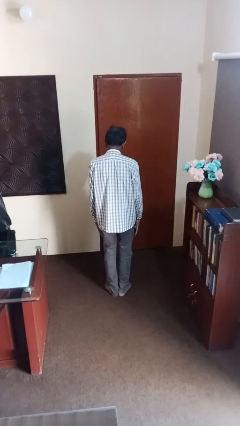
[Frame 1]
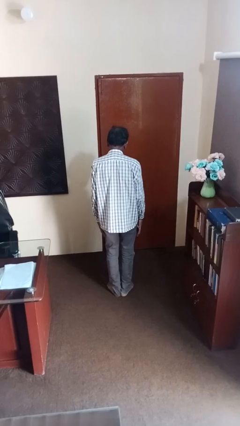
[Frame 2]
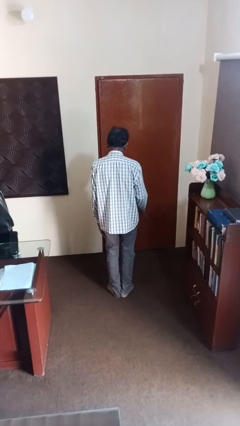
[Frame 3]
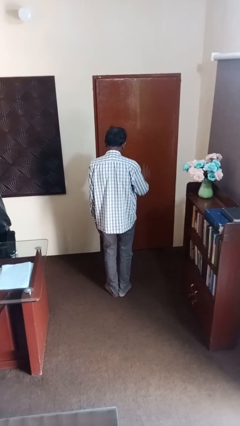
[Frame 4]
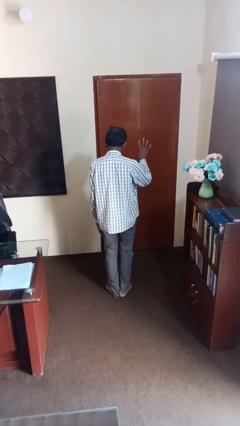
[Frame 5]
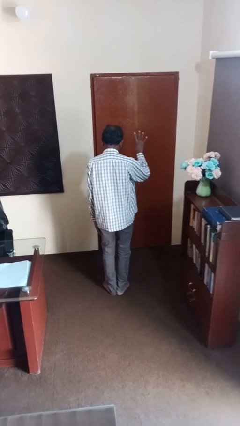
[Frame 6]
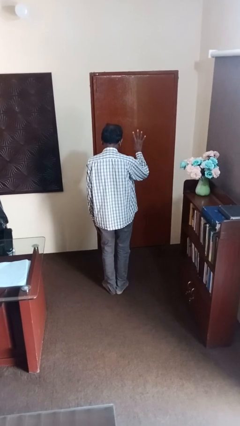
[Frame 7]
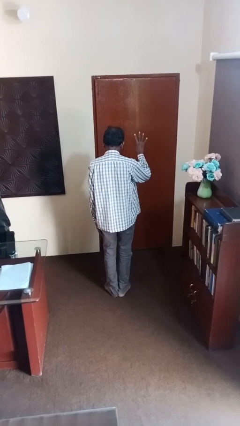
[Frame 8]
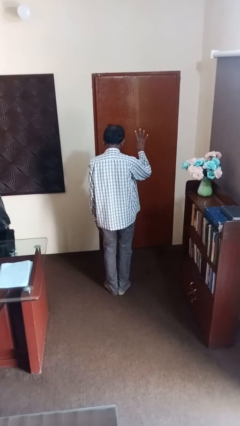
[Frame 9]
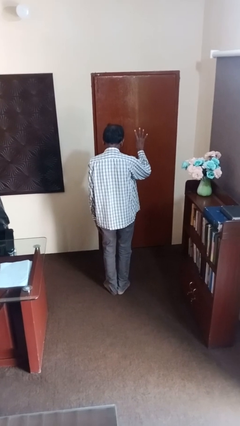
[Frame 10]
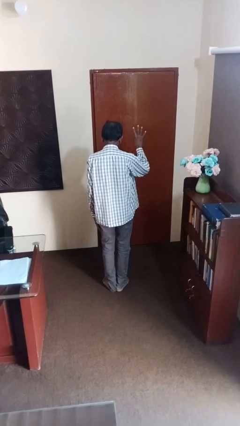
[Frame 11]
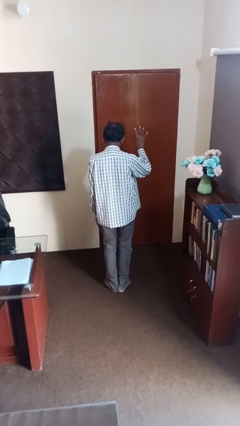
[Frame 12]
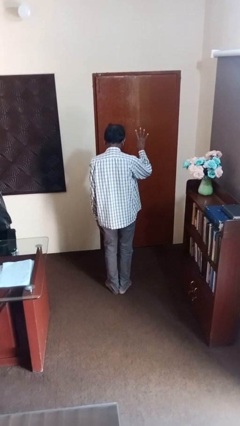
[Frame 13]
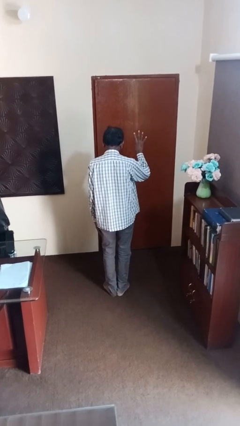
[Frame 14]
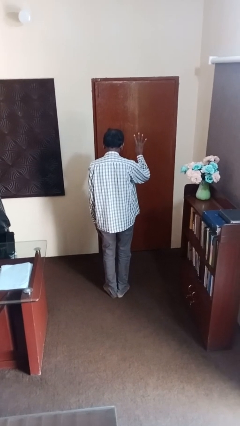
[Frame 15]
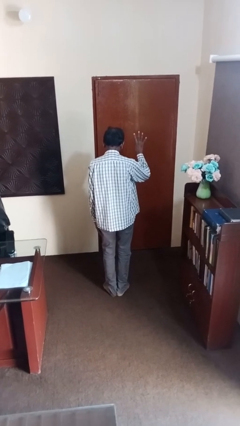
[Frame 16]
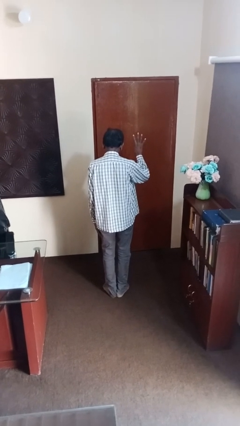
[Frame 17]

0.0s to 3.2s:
person gestures number four

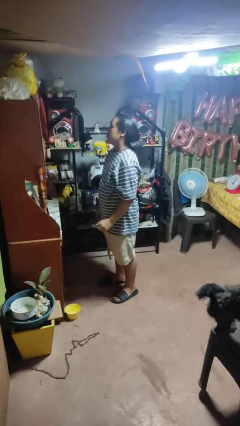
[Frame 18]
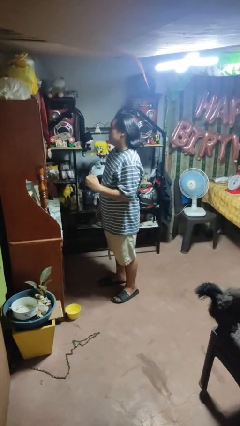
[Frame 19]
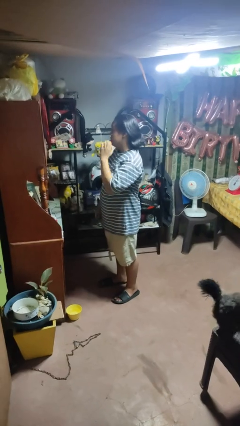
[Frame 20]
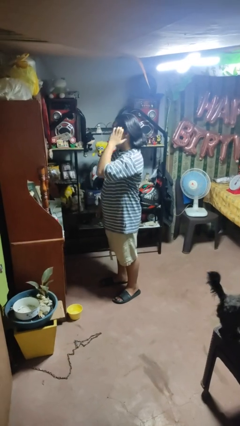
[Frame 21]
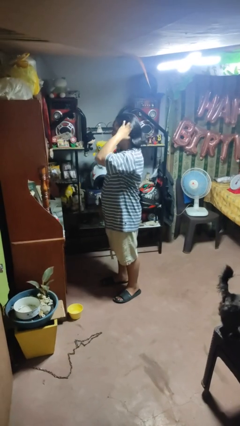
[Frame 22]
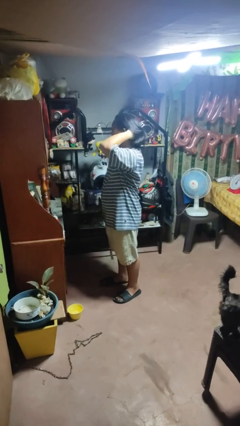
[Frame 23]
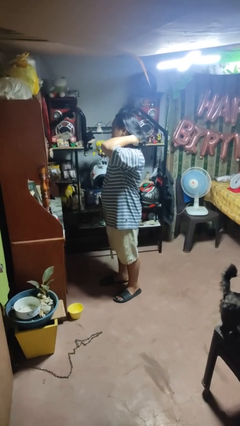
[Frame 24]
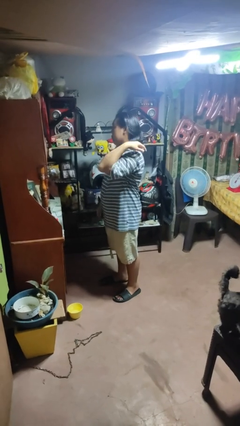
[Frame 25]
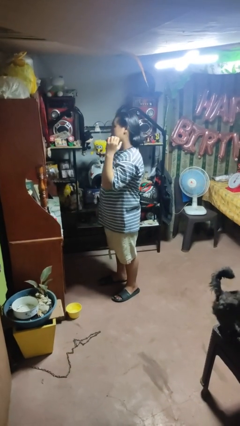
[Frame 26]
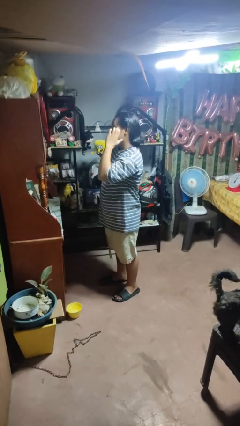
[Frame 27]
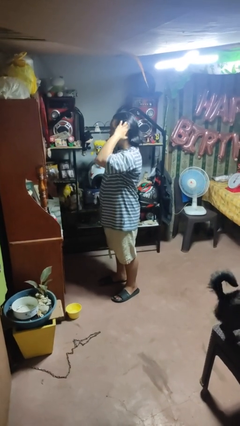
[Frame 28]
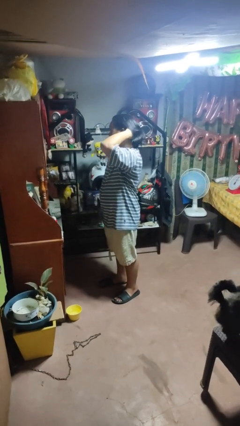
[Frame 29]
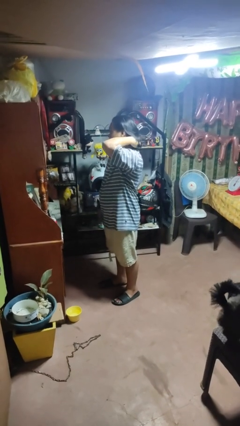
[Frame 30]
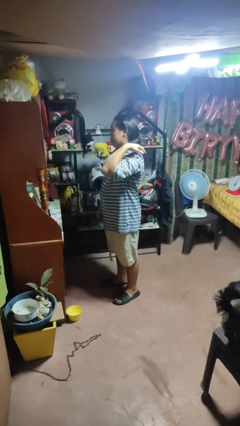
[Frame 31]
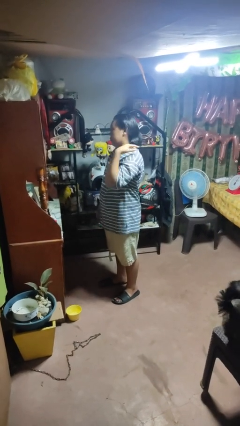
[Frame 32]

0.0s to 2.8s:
person strokes hair

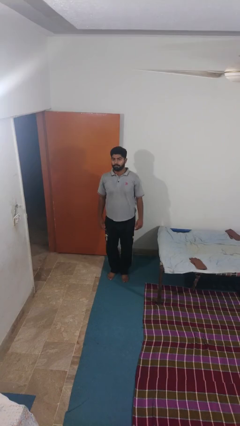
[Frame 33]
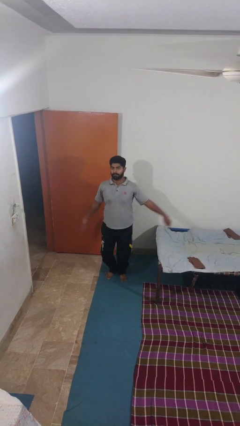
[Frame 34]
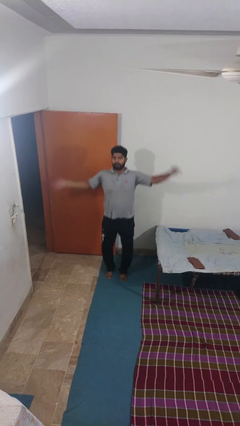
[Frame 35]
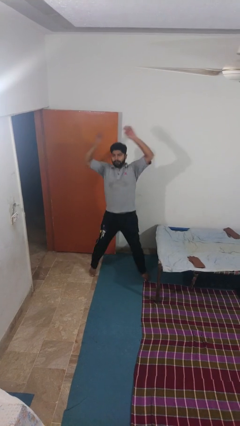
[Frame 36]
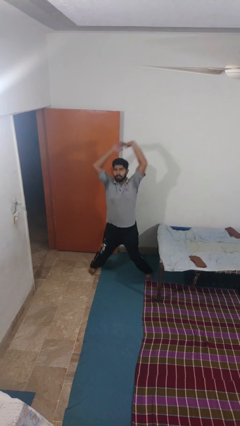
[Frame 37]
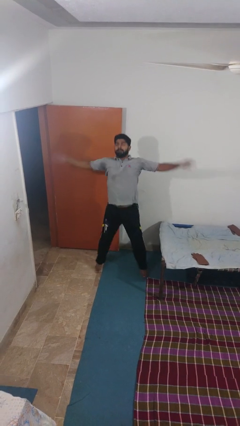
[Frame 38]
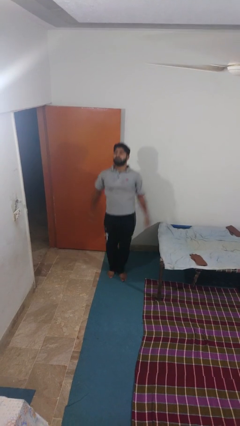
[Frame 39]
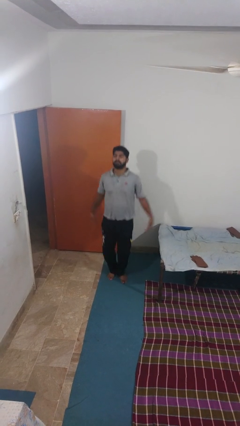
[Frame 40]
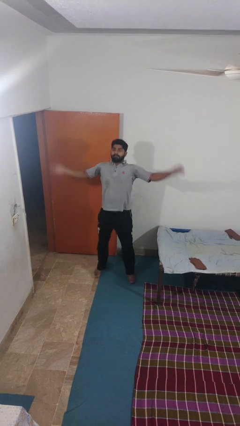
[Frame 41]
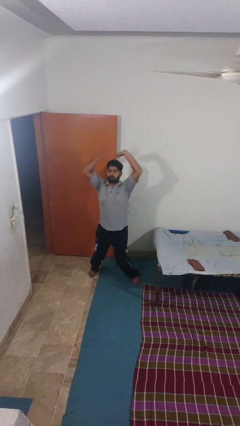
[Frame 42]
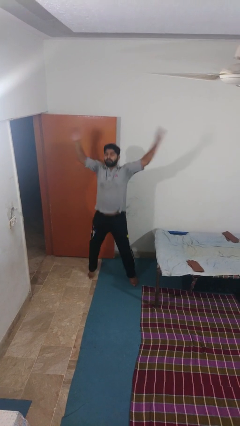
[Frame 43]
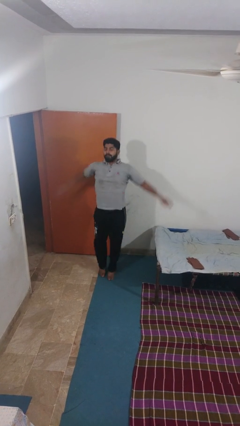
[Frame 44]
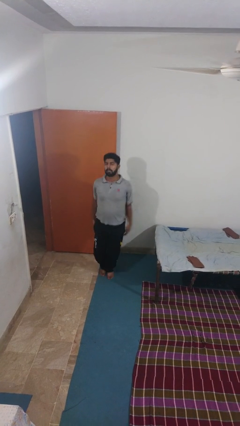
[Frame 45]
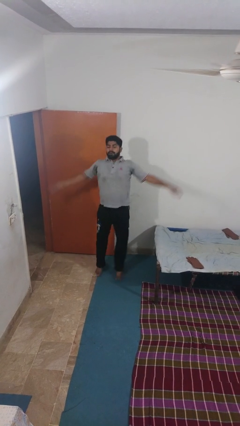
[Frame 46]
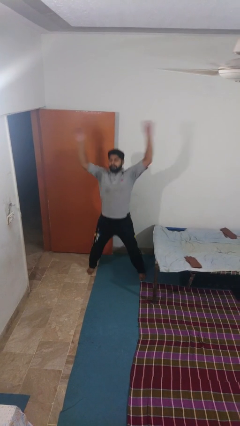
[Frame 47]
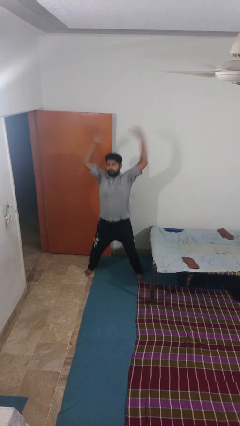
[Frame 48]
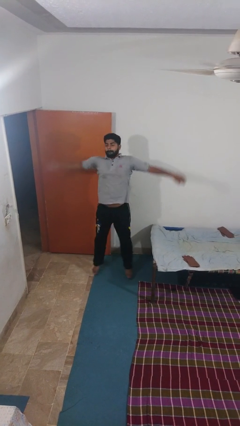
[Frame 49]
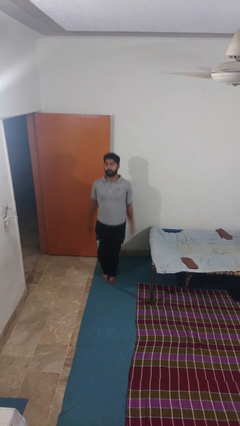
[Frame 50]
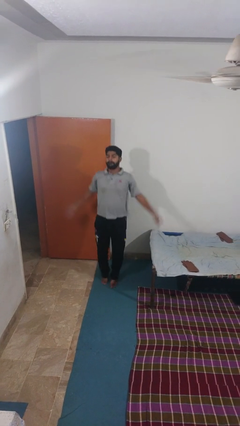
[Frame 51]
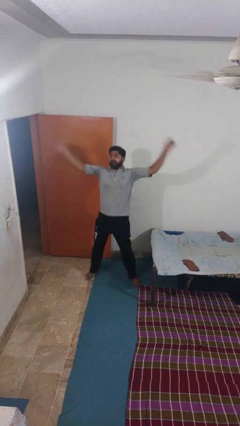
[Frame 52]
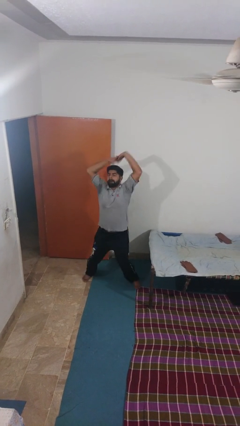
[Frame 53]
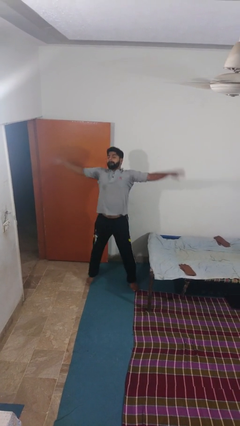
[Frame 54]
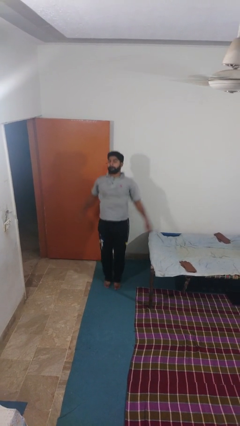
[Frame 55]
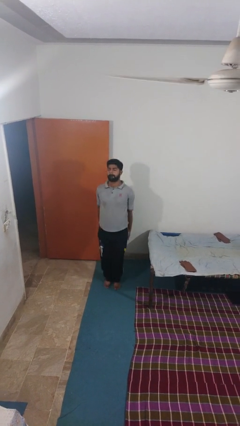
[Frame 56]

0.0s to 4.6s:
person exercises with jumping jacks

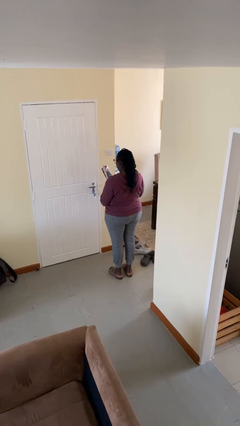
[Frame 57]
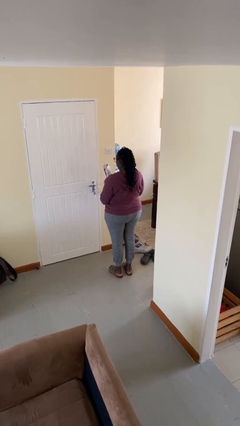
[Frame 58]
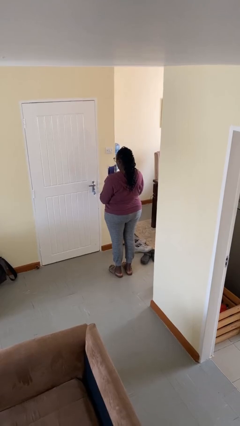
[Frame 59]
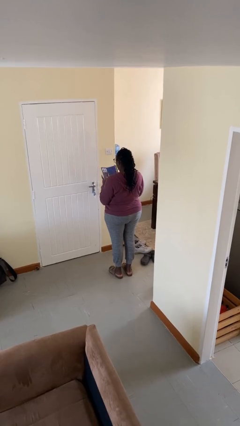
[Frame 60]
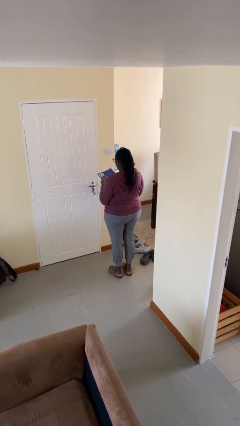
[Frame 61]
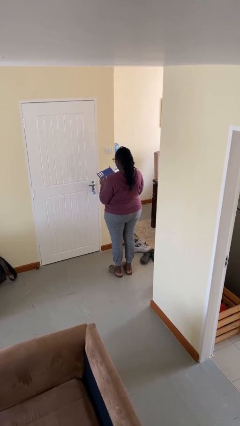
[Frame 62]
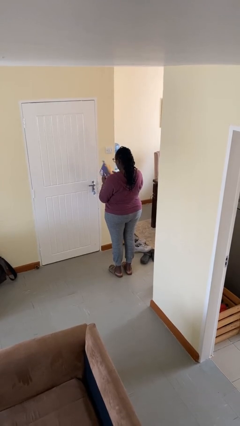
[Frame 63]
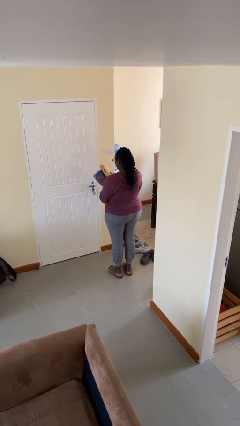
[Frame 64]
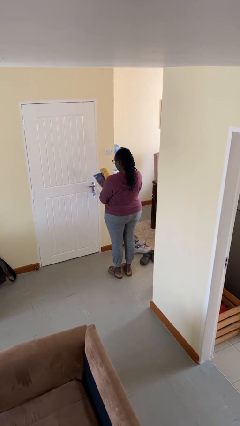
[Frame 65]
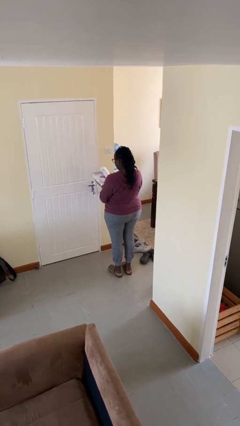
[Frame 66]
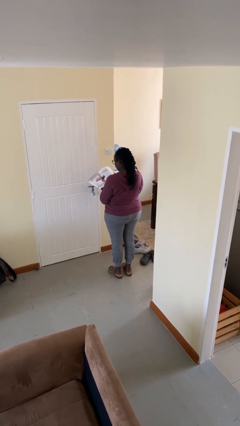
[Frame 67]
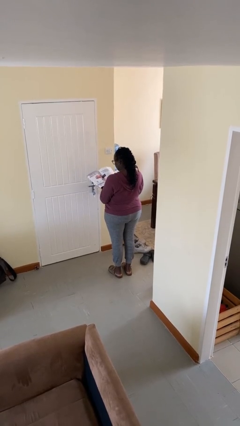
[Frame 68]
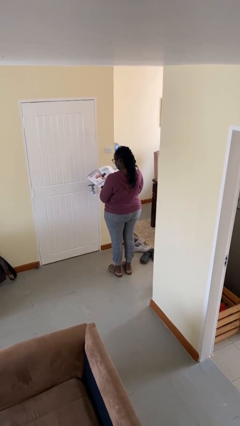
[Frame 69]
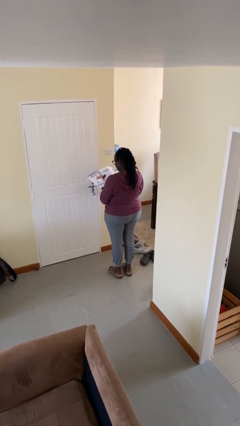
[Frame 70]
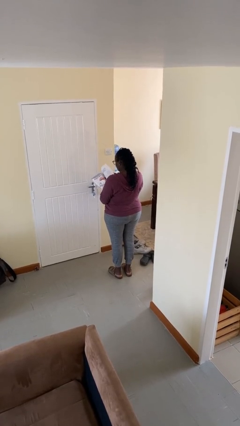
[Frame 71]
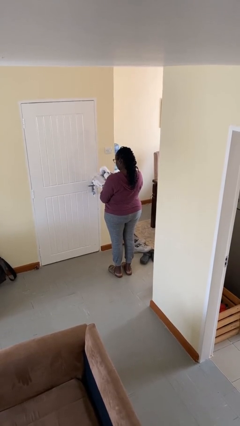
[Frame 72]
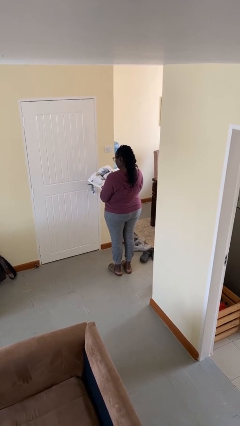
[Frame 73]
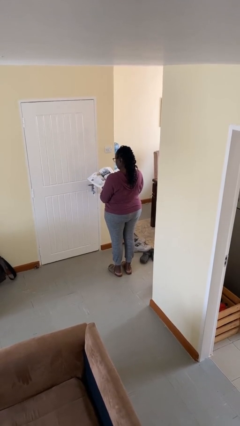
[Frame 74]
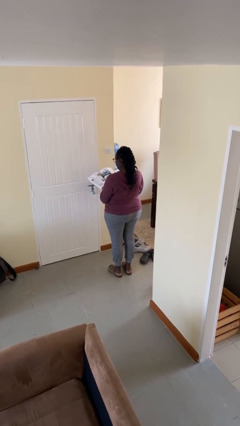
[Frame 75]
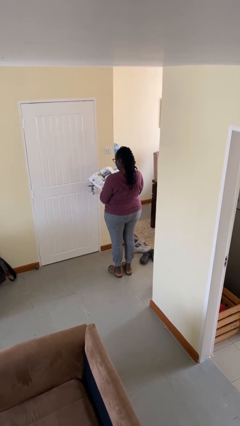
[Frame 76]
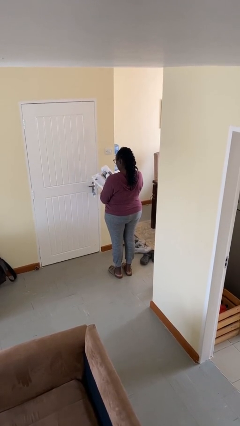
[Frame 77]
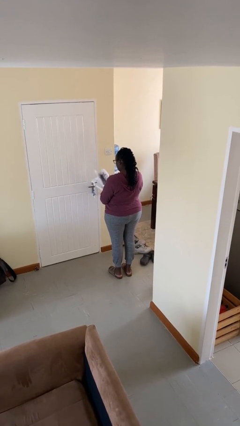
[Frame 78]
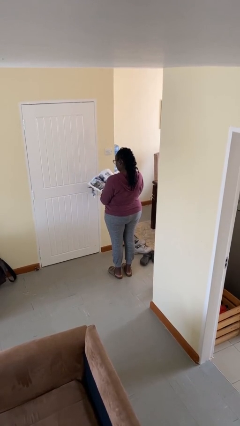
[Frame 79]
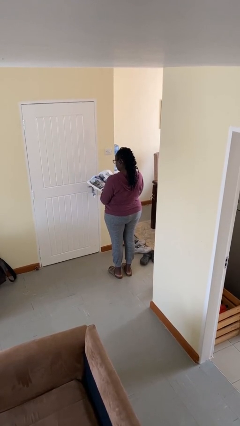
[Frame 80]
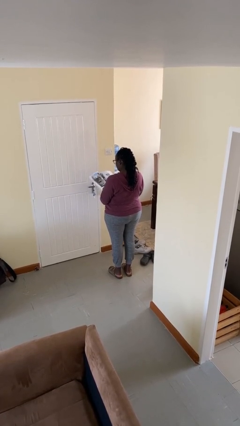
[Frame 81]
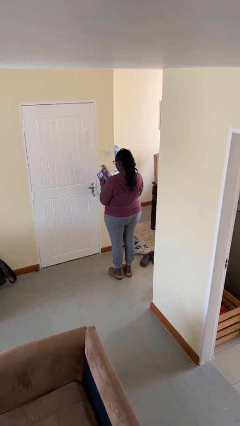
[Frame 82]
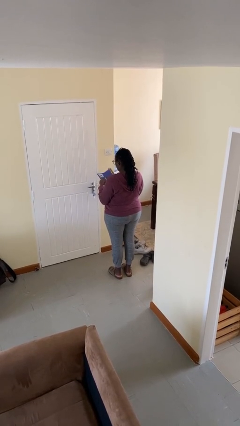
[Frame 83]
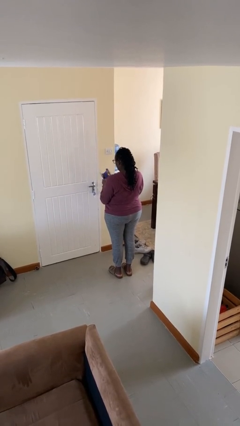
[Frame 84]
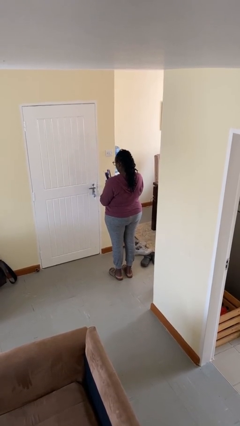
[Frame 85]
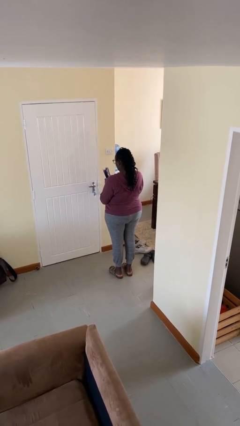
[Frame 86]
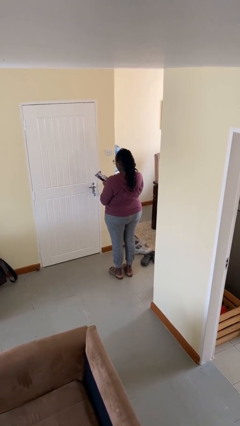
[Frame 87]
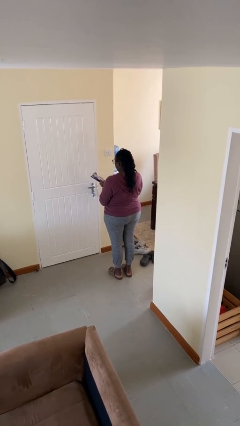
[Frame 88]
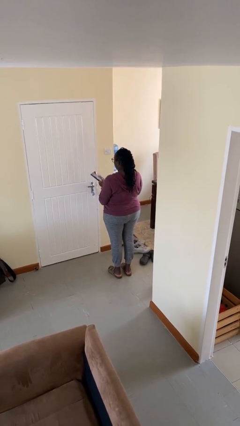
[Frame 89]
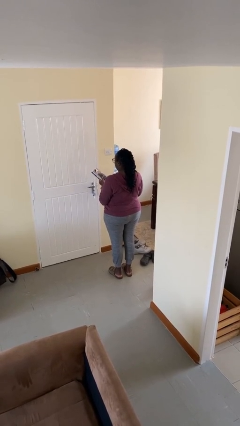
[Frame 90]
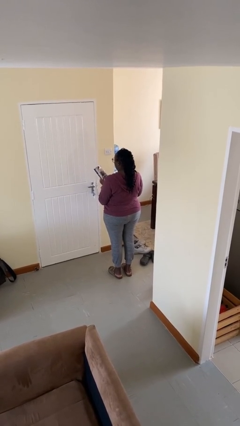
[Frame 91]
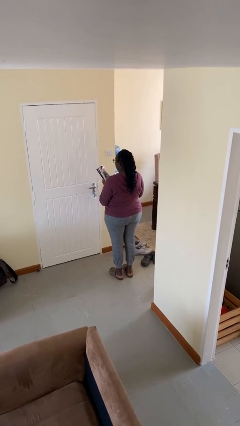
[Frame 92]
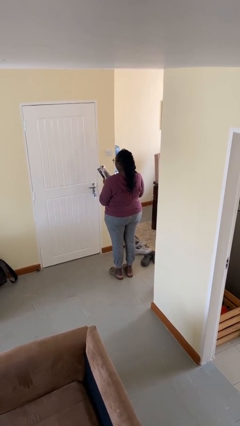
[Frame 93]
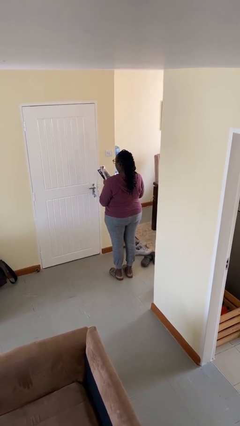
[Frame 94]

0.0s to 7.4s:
person reads magazine
